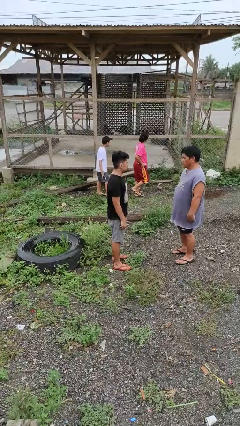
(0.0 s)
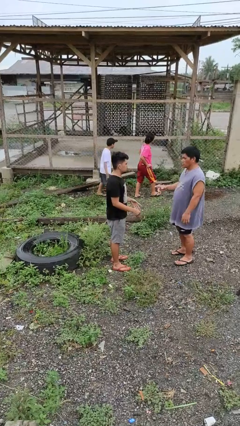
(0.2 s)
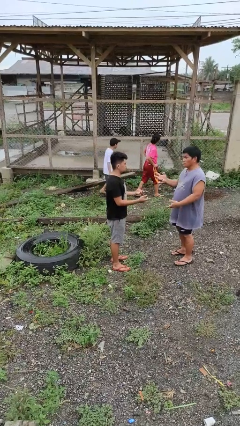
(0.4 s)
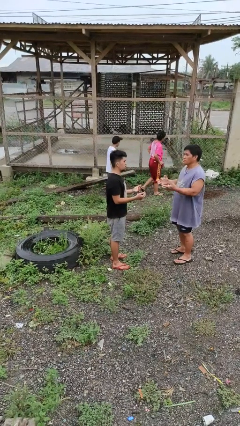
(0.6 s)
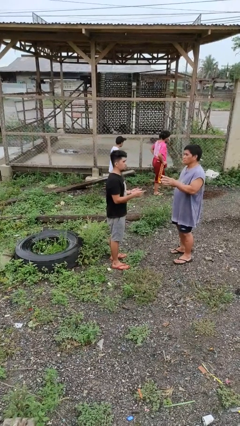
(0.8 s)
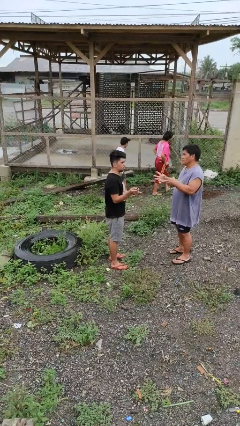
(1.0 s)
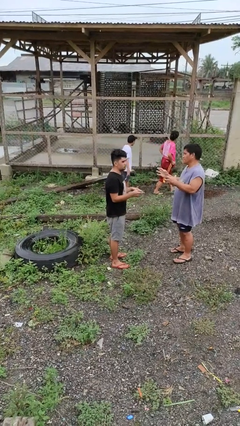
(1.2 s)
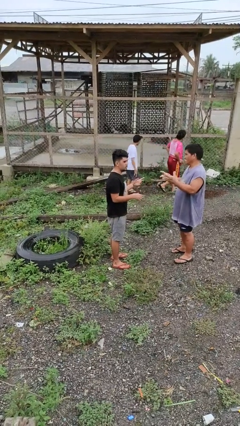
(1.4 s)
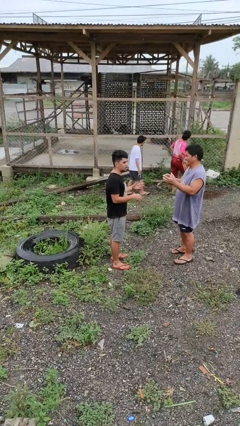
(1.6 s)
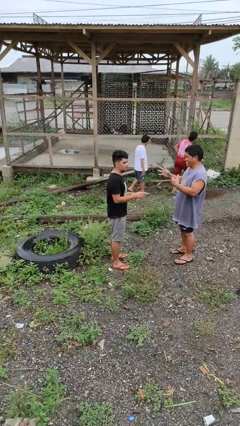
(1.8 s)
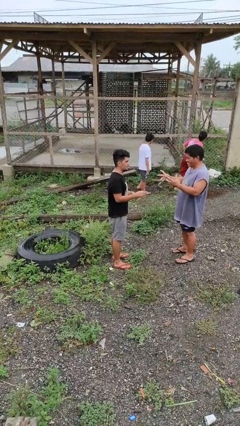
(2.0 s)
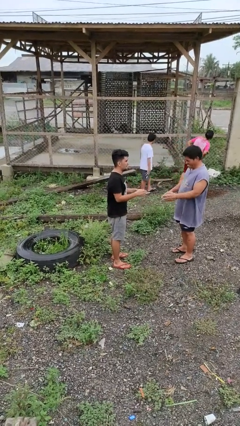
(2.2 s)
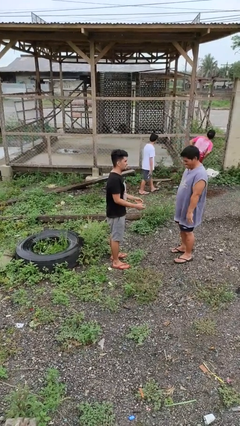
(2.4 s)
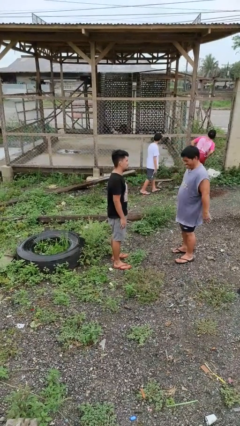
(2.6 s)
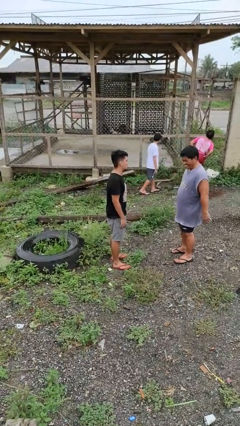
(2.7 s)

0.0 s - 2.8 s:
person talks to person

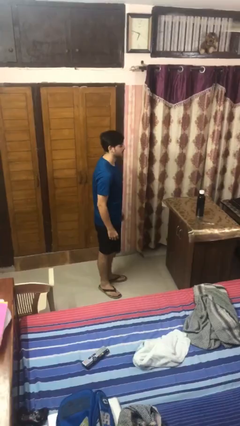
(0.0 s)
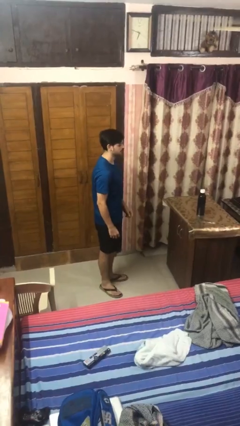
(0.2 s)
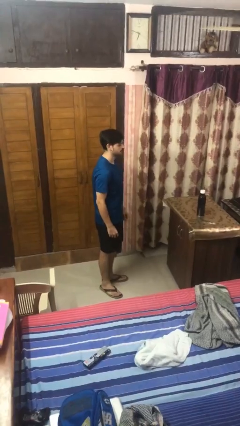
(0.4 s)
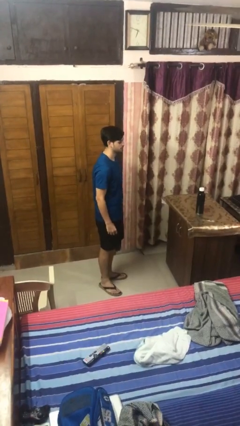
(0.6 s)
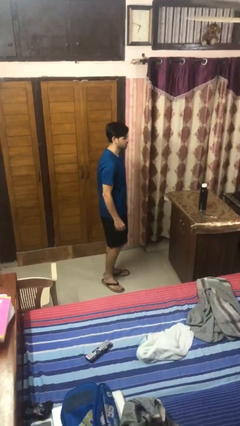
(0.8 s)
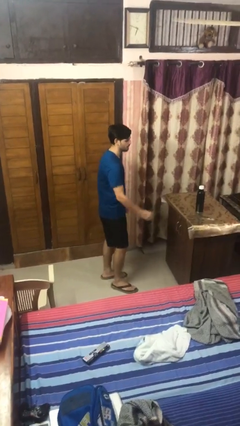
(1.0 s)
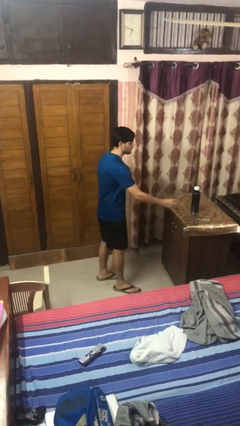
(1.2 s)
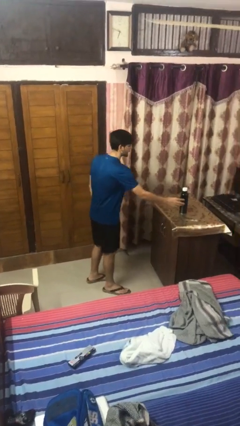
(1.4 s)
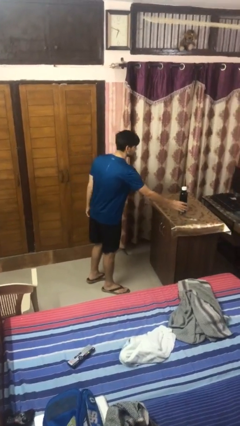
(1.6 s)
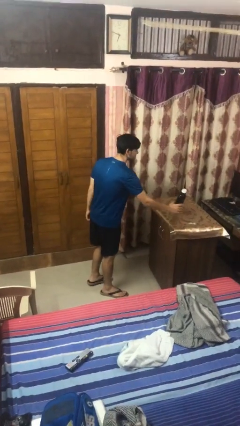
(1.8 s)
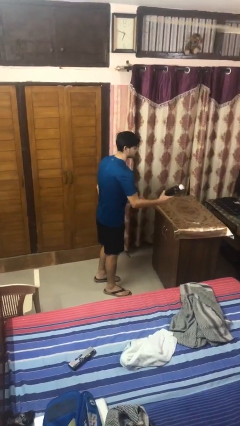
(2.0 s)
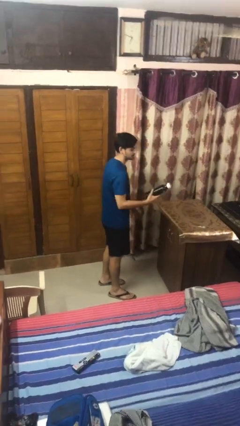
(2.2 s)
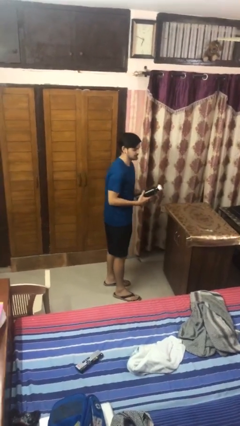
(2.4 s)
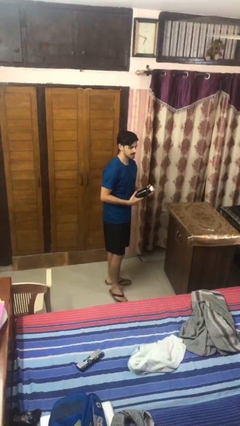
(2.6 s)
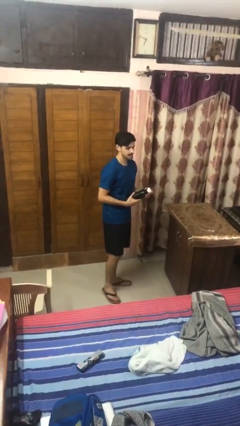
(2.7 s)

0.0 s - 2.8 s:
person picks up object from countertop

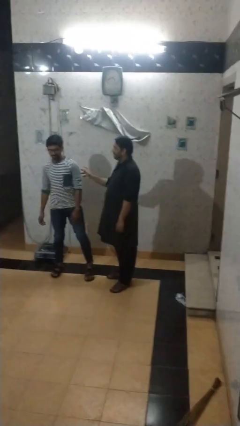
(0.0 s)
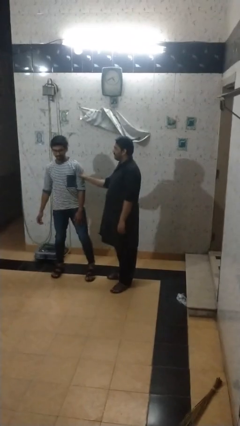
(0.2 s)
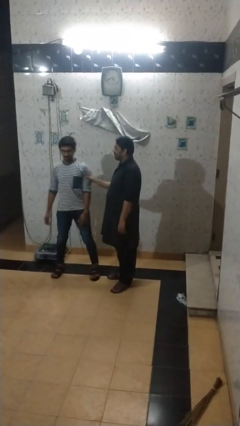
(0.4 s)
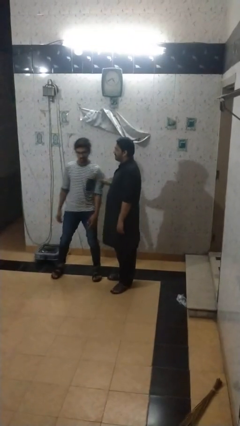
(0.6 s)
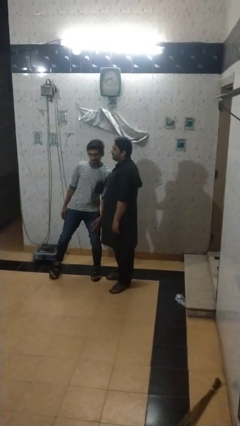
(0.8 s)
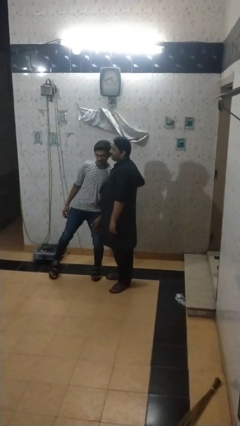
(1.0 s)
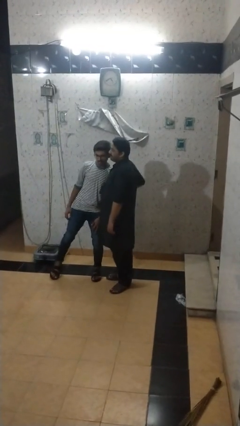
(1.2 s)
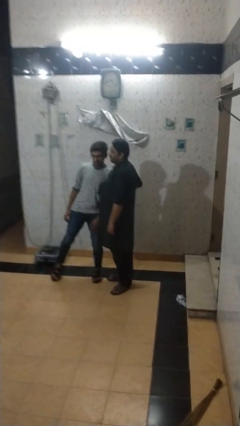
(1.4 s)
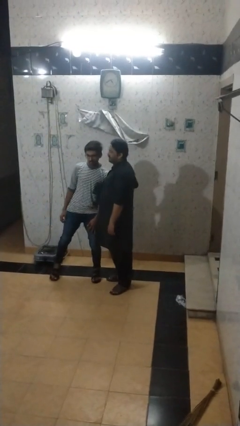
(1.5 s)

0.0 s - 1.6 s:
person grabs person by bicep

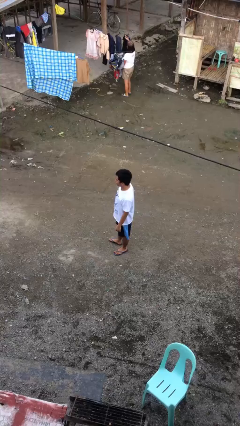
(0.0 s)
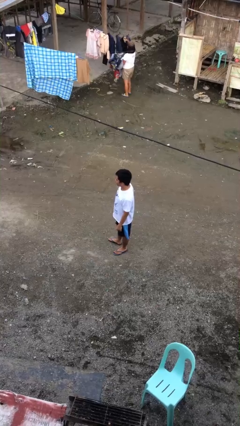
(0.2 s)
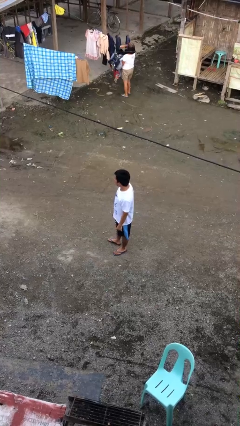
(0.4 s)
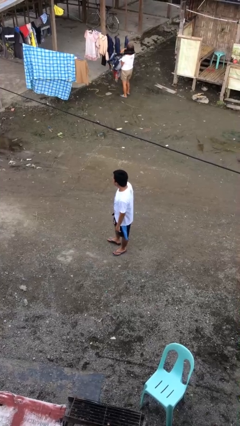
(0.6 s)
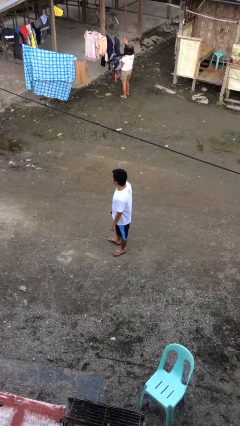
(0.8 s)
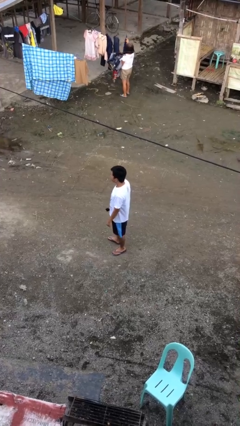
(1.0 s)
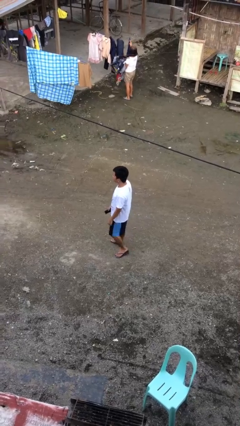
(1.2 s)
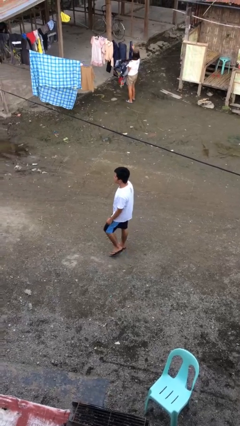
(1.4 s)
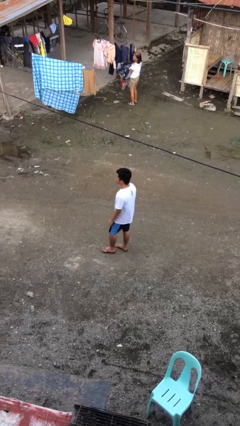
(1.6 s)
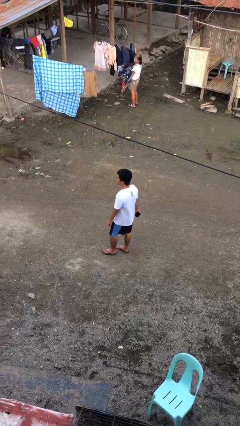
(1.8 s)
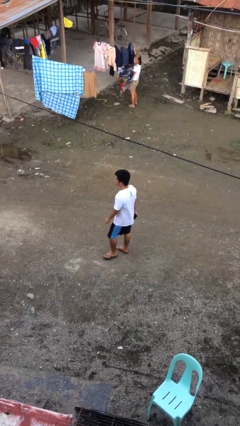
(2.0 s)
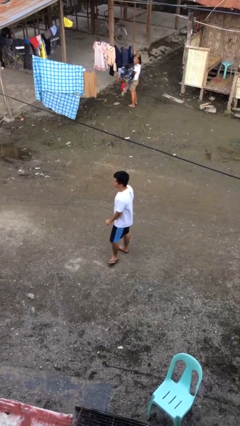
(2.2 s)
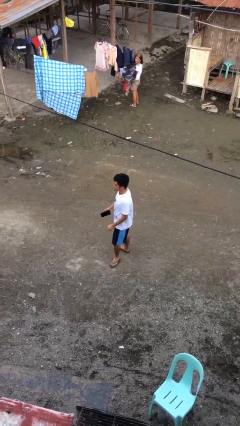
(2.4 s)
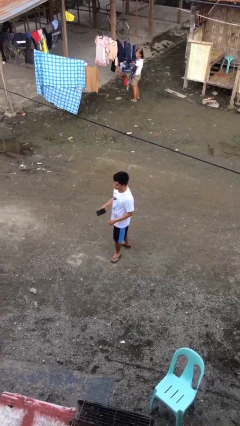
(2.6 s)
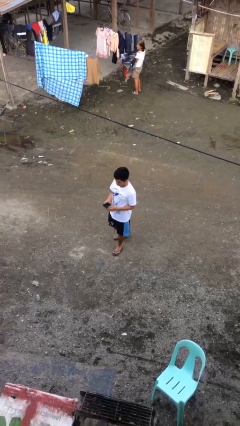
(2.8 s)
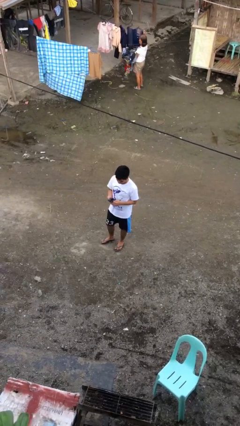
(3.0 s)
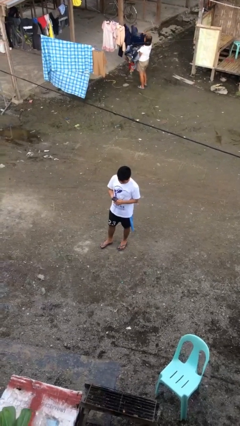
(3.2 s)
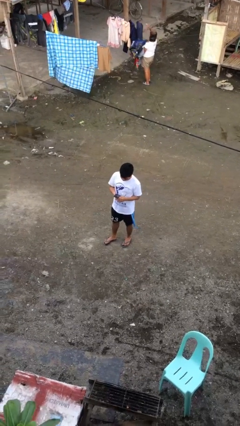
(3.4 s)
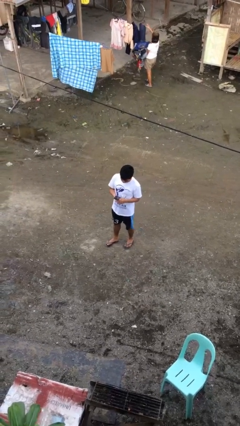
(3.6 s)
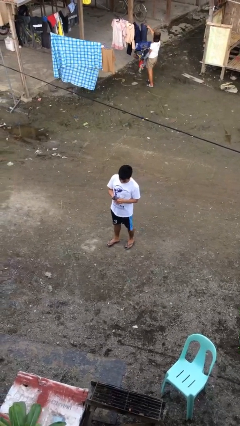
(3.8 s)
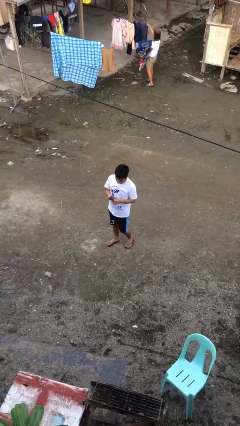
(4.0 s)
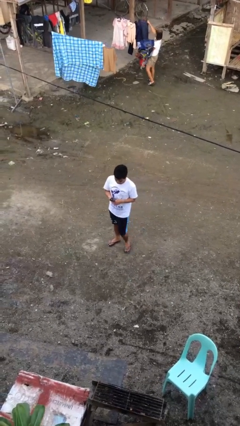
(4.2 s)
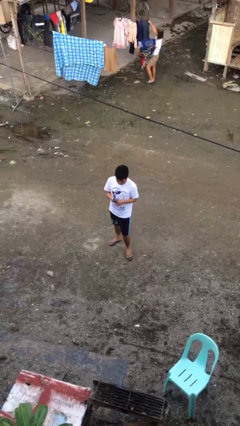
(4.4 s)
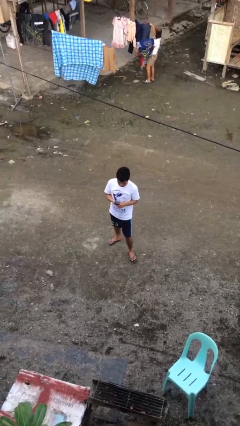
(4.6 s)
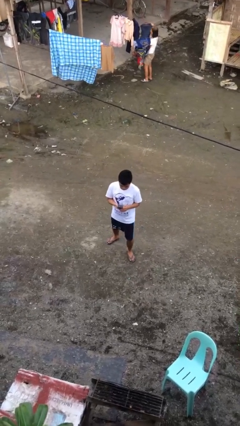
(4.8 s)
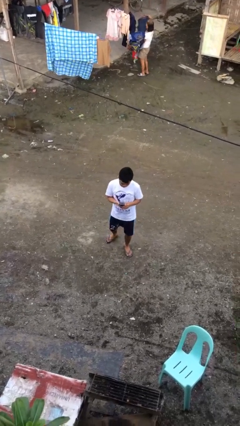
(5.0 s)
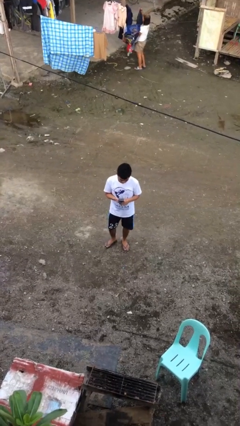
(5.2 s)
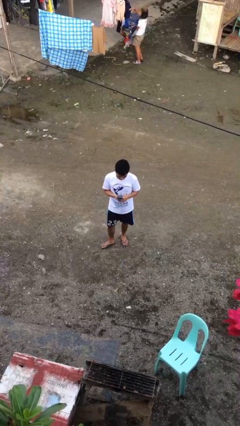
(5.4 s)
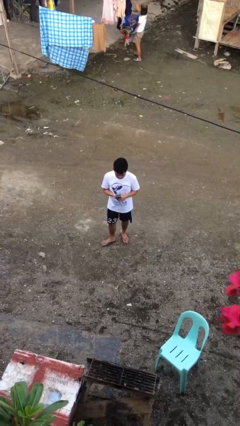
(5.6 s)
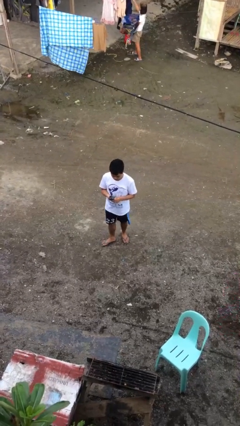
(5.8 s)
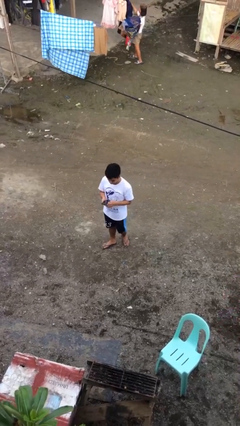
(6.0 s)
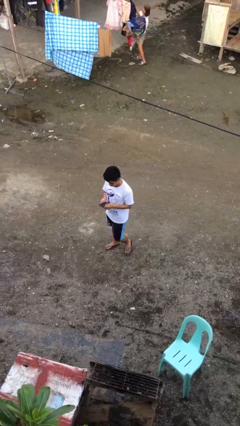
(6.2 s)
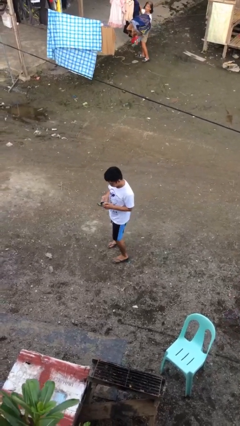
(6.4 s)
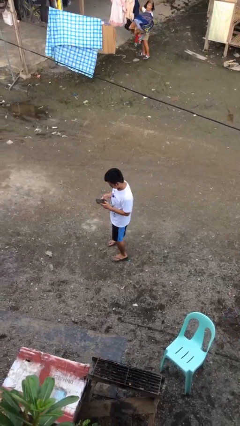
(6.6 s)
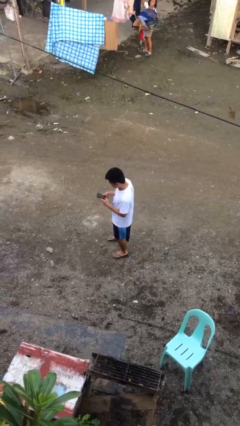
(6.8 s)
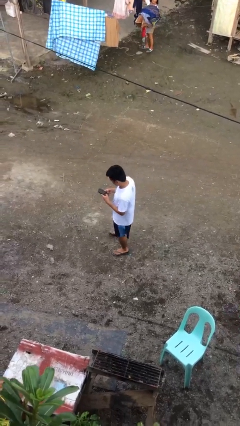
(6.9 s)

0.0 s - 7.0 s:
person walks

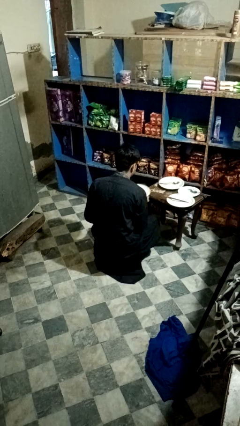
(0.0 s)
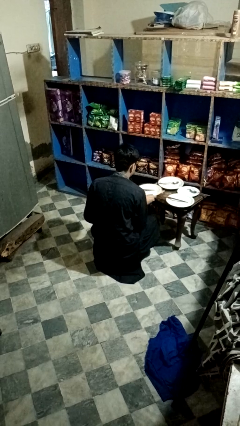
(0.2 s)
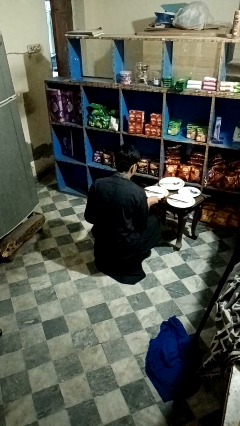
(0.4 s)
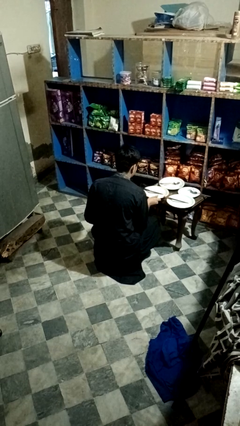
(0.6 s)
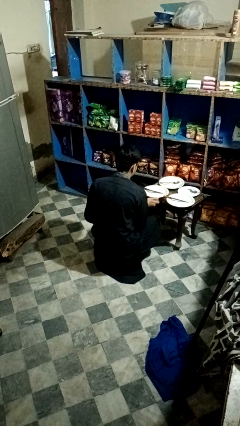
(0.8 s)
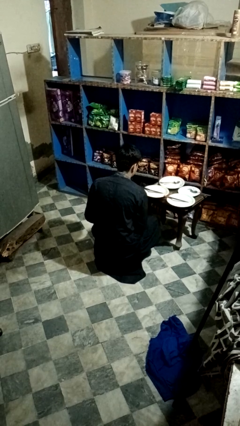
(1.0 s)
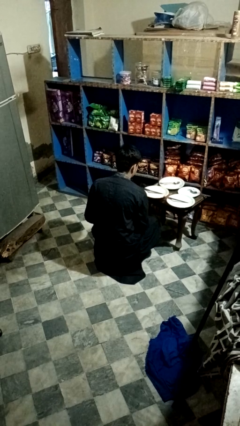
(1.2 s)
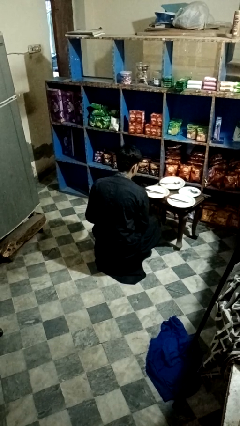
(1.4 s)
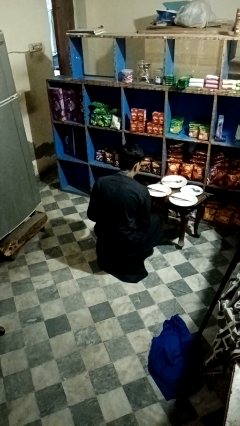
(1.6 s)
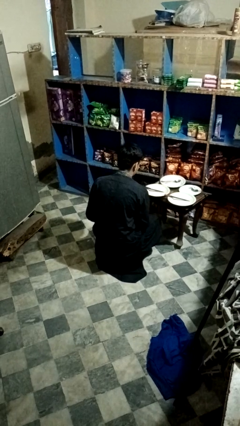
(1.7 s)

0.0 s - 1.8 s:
person sets table

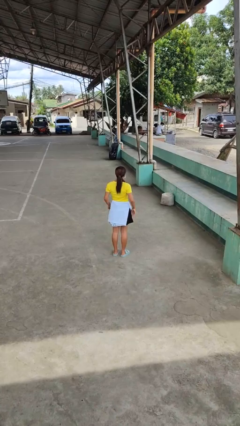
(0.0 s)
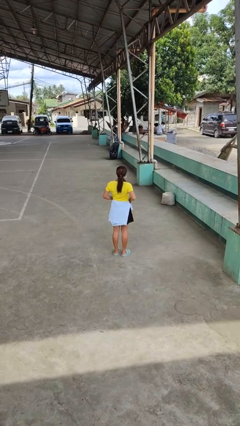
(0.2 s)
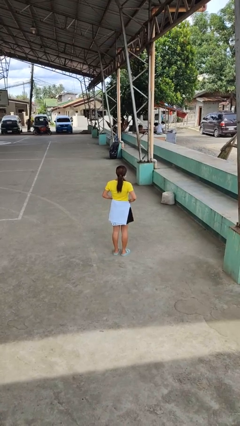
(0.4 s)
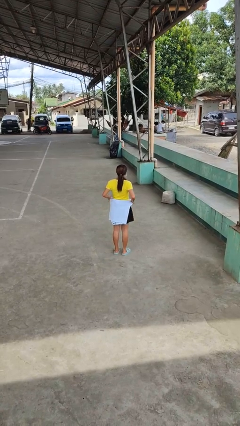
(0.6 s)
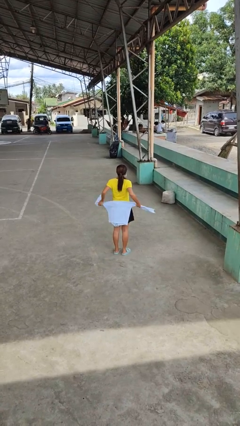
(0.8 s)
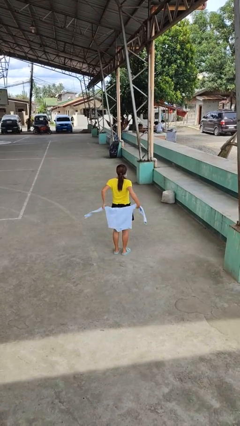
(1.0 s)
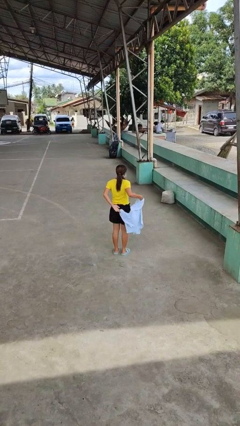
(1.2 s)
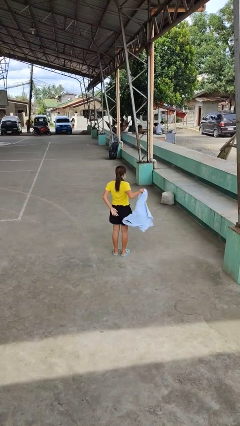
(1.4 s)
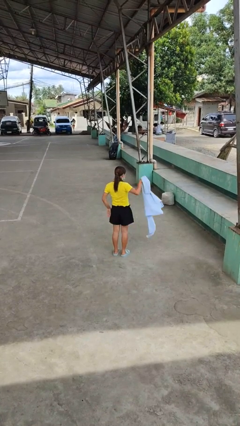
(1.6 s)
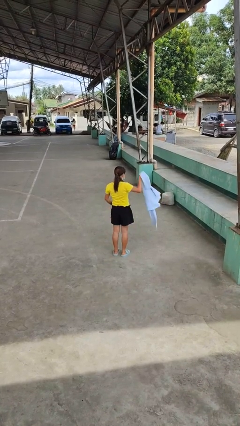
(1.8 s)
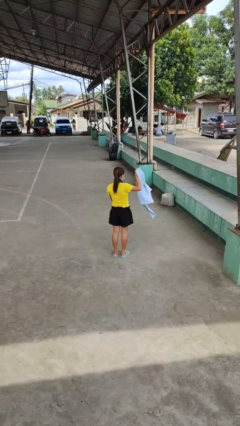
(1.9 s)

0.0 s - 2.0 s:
person unties jacket around waist
